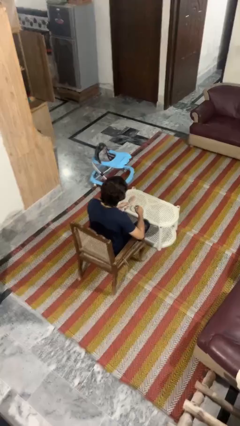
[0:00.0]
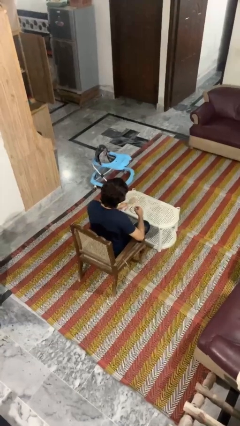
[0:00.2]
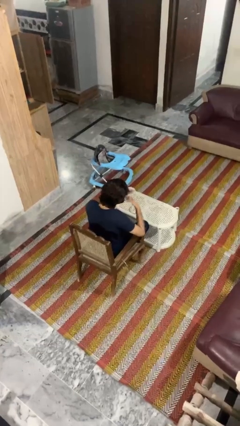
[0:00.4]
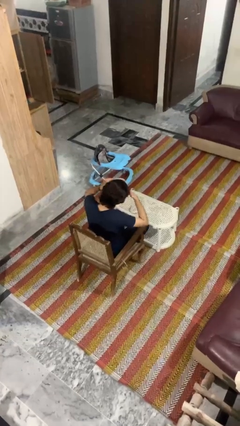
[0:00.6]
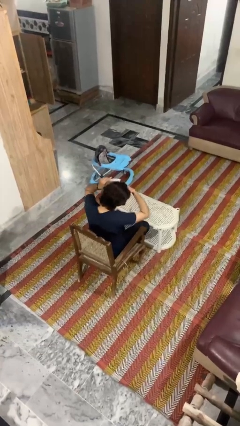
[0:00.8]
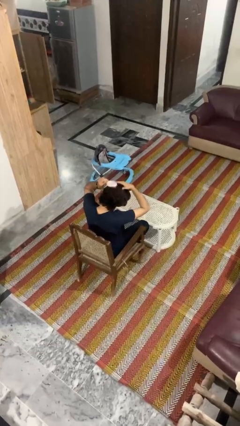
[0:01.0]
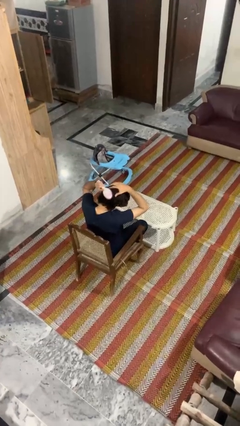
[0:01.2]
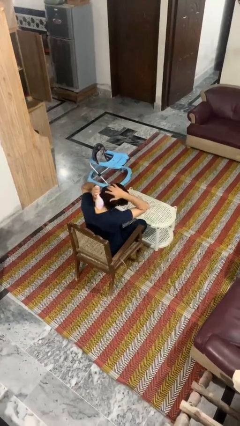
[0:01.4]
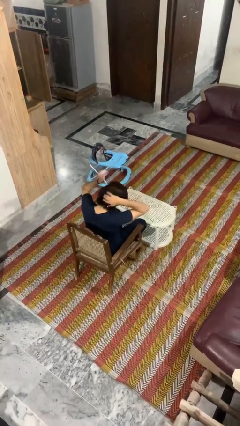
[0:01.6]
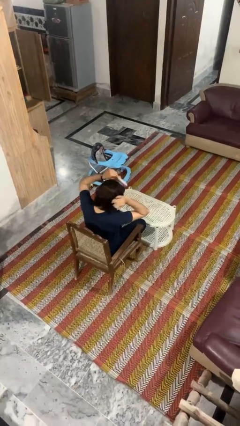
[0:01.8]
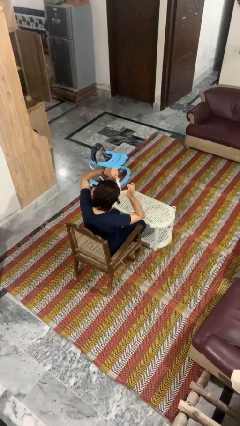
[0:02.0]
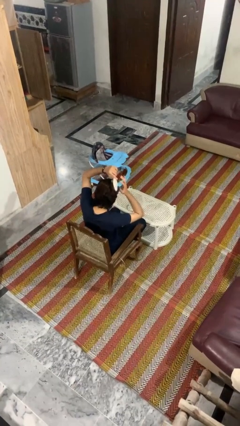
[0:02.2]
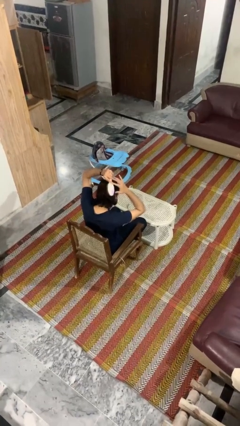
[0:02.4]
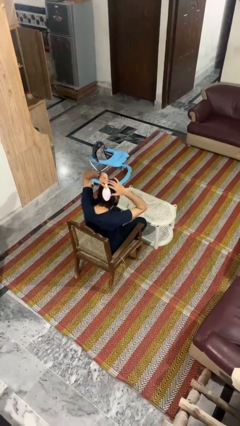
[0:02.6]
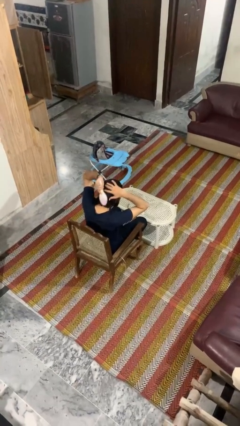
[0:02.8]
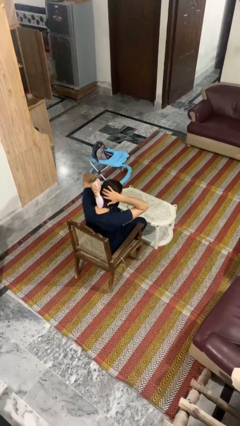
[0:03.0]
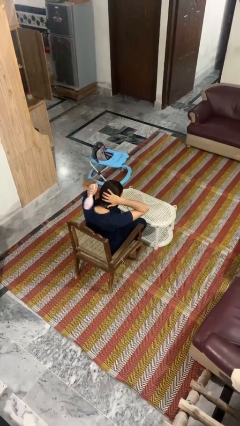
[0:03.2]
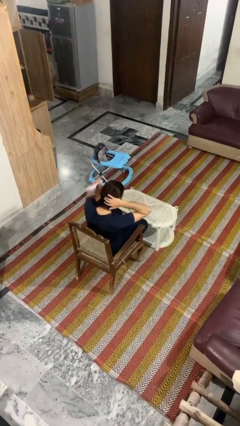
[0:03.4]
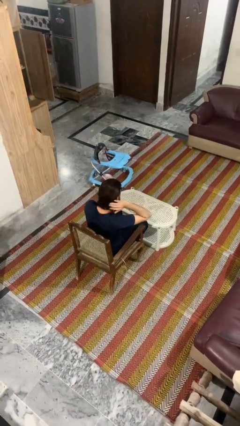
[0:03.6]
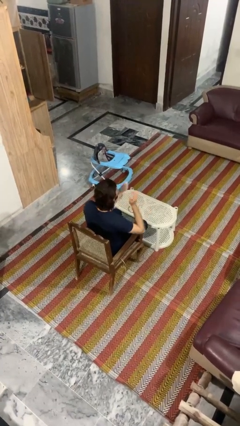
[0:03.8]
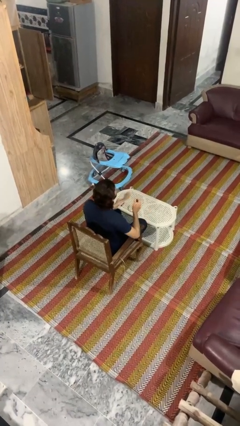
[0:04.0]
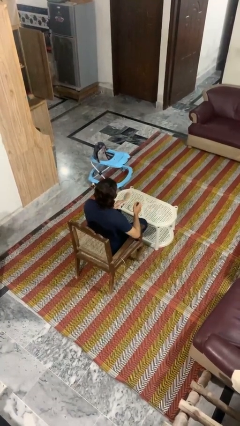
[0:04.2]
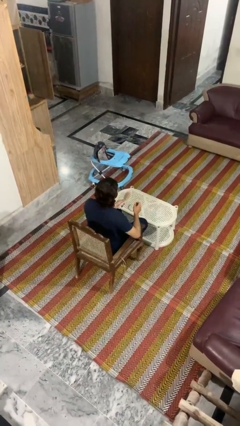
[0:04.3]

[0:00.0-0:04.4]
person brushes hair

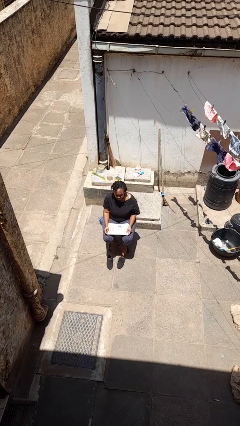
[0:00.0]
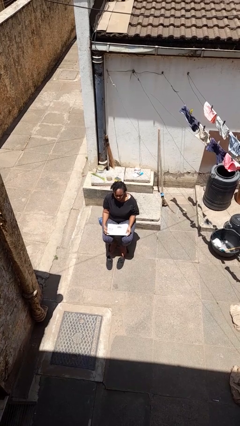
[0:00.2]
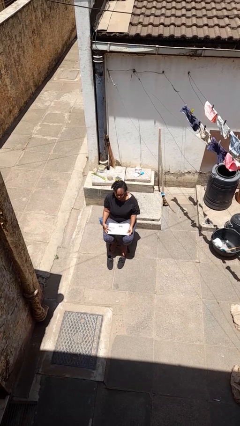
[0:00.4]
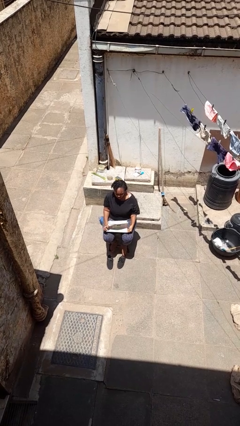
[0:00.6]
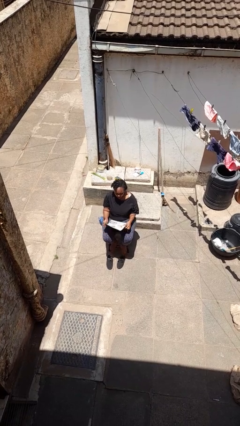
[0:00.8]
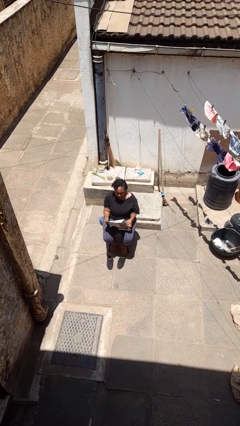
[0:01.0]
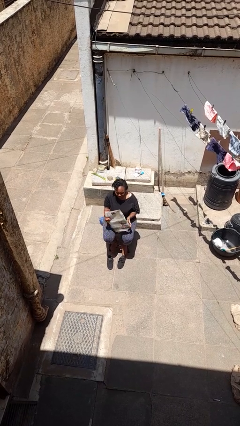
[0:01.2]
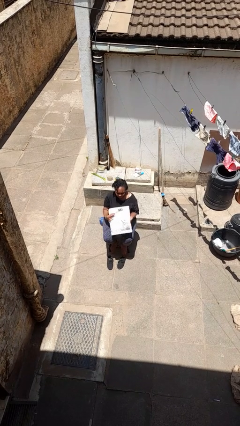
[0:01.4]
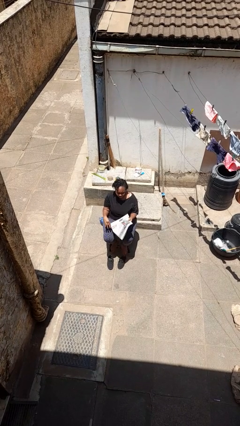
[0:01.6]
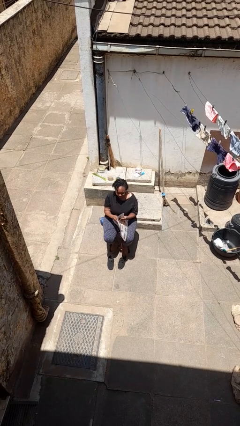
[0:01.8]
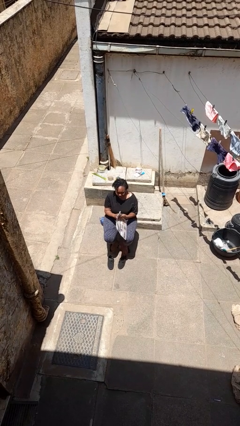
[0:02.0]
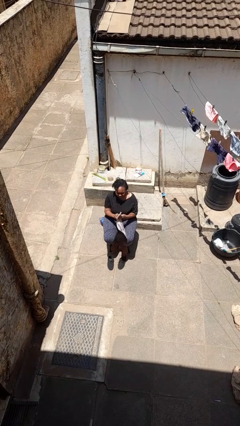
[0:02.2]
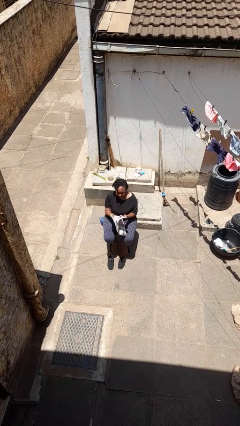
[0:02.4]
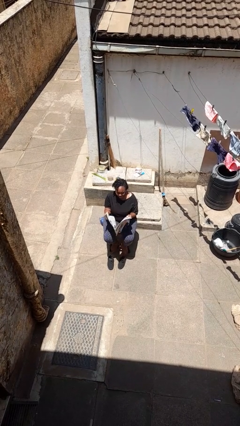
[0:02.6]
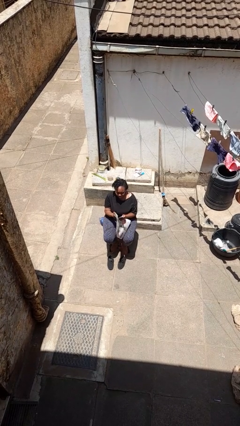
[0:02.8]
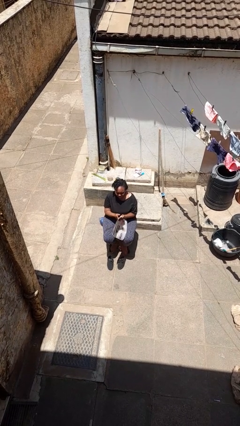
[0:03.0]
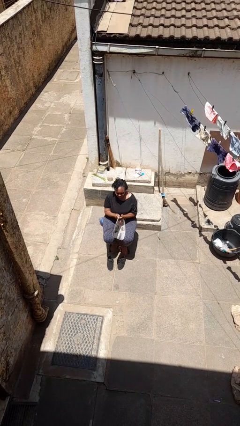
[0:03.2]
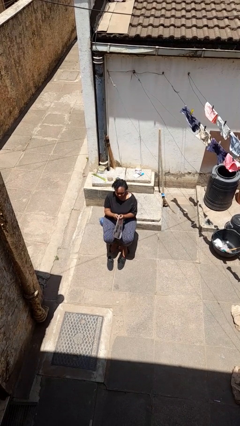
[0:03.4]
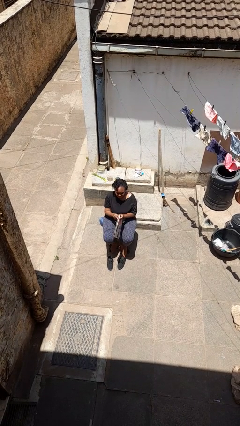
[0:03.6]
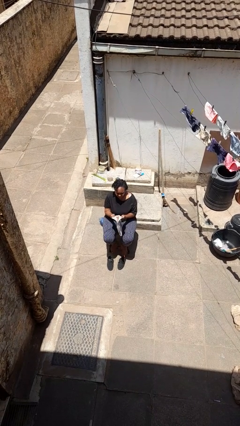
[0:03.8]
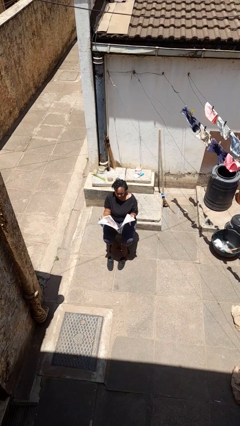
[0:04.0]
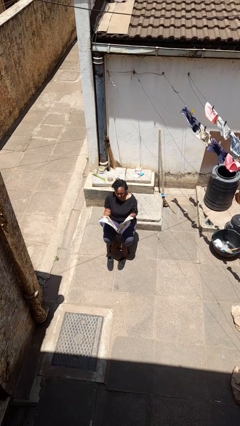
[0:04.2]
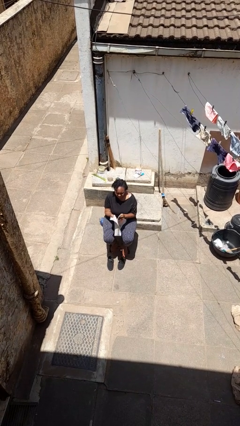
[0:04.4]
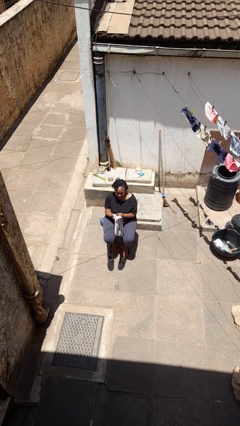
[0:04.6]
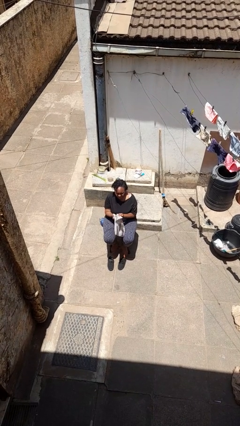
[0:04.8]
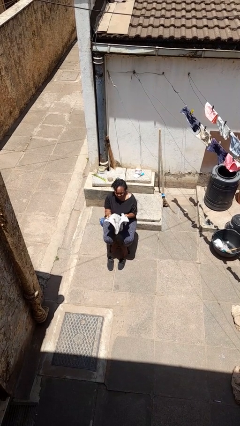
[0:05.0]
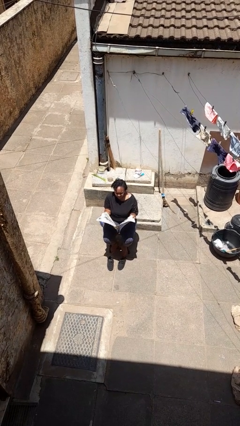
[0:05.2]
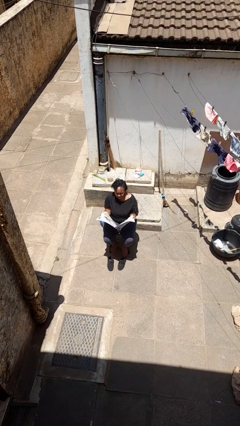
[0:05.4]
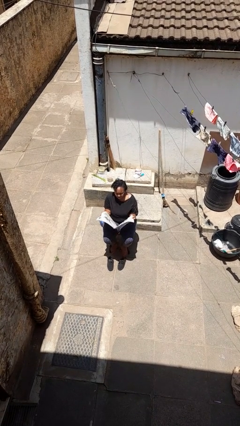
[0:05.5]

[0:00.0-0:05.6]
person reads newspaper

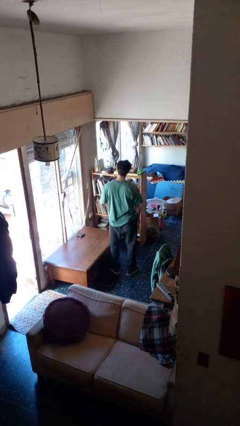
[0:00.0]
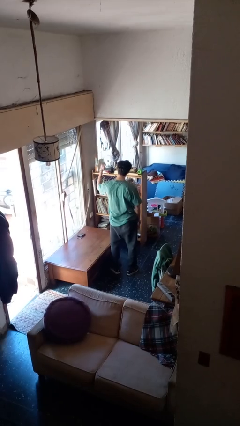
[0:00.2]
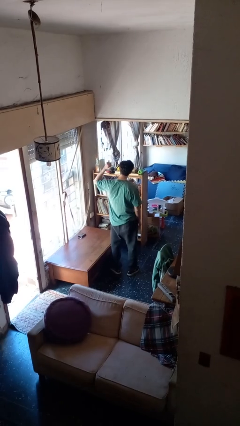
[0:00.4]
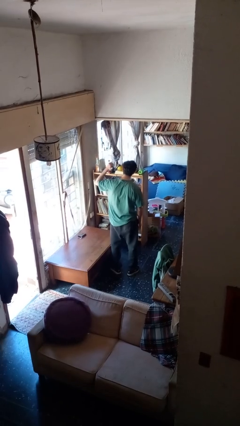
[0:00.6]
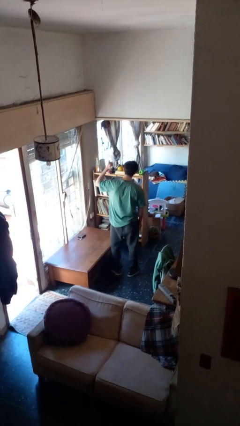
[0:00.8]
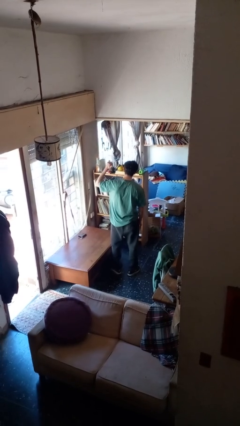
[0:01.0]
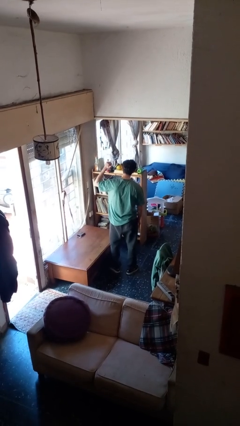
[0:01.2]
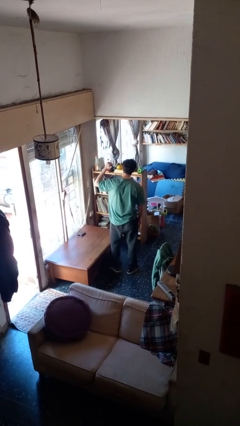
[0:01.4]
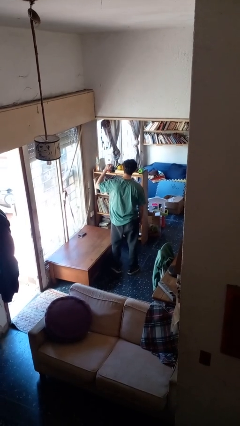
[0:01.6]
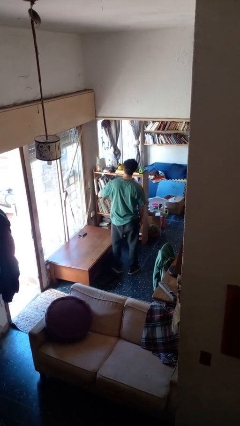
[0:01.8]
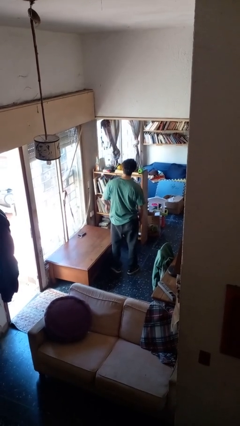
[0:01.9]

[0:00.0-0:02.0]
person gestures behind me

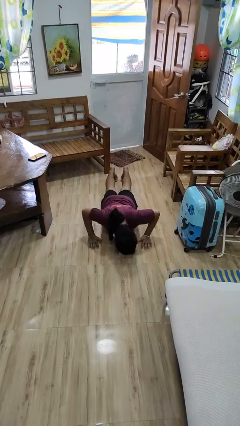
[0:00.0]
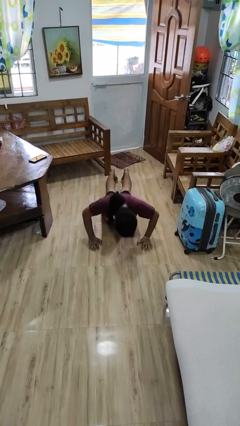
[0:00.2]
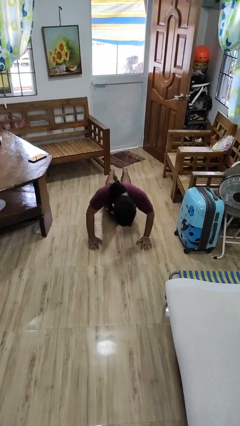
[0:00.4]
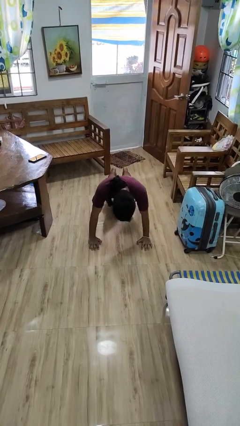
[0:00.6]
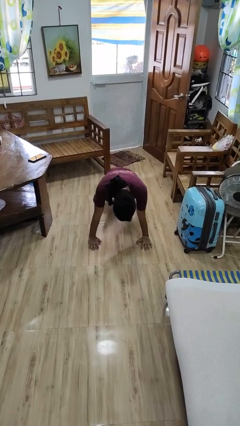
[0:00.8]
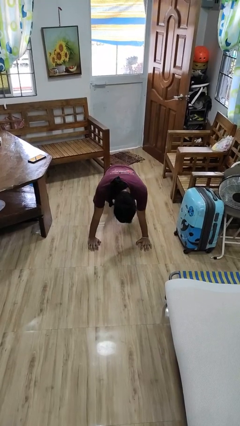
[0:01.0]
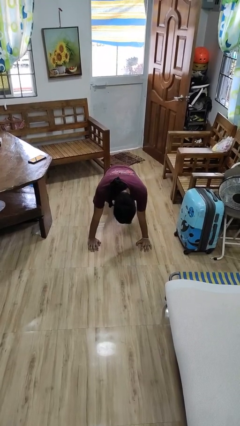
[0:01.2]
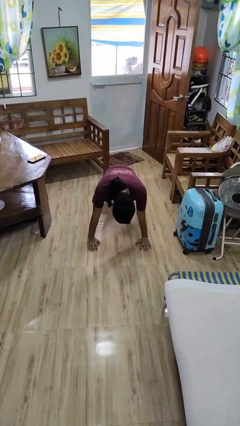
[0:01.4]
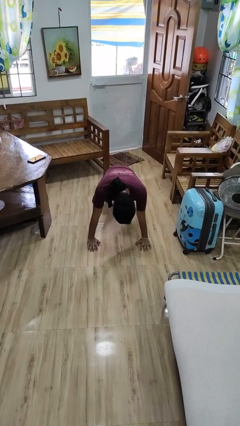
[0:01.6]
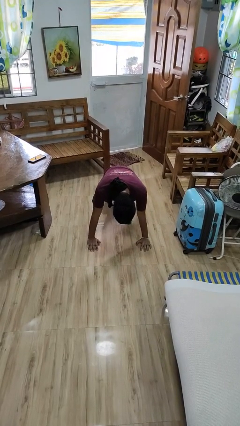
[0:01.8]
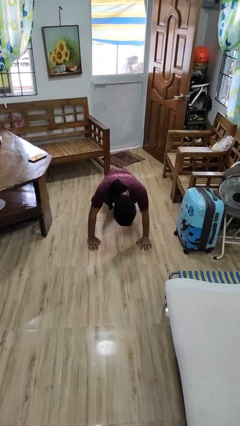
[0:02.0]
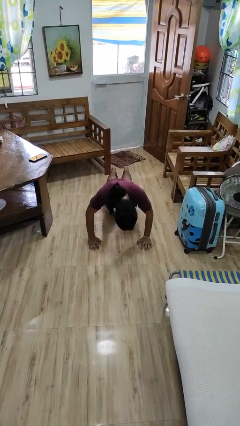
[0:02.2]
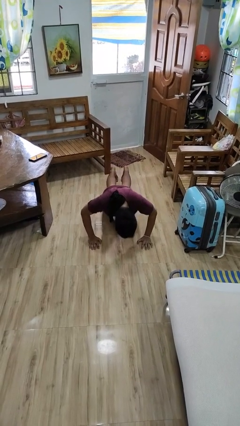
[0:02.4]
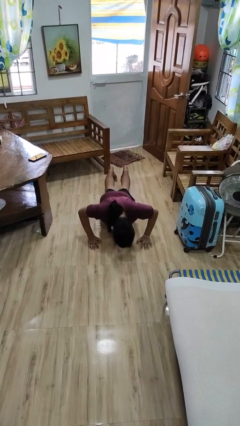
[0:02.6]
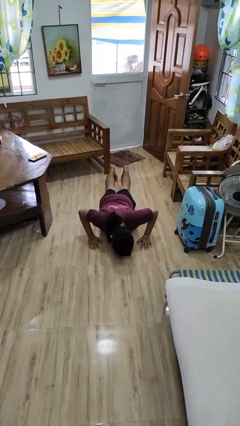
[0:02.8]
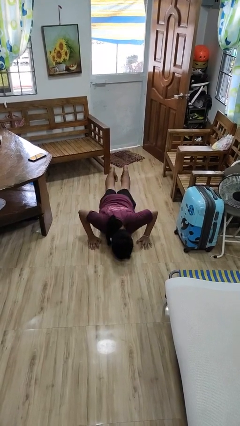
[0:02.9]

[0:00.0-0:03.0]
person exercises with pushup

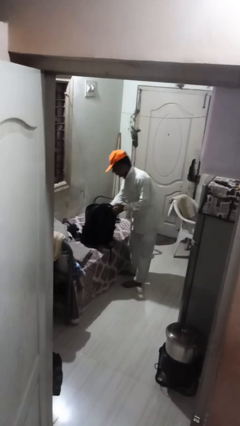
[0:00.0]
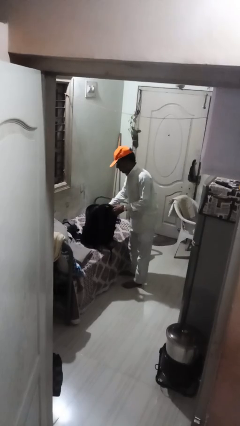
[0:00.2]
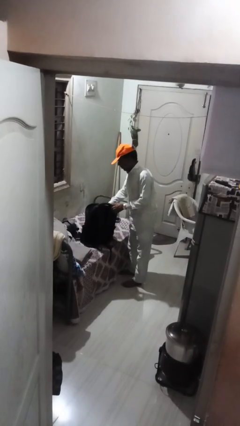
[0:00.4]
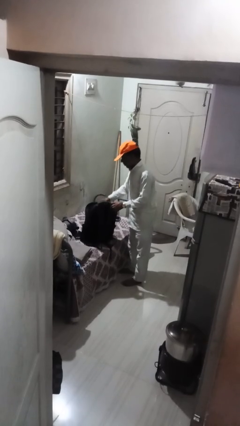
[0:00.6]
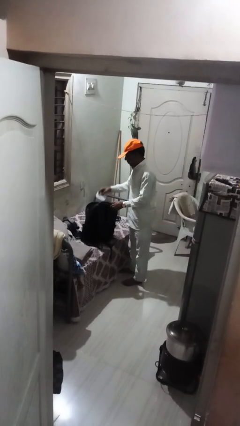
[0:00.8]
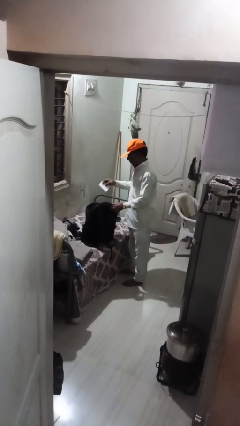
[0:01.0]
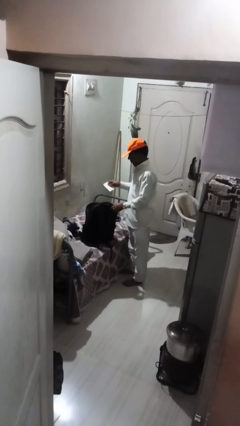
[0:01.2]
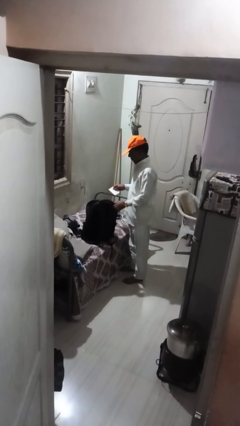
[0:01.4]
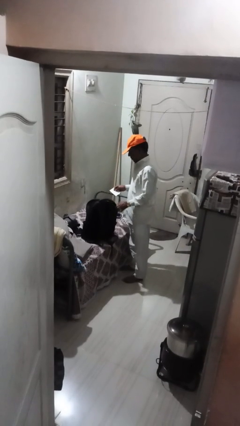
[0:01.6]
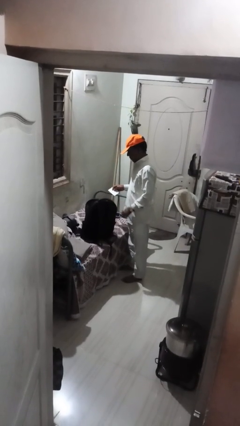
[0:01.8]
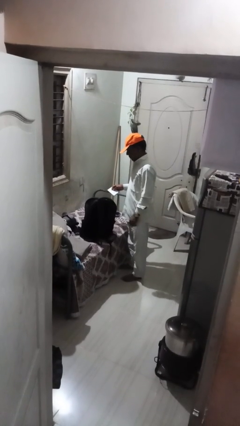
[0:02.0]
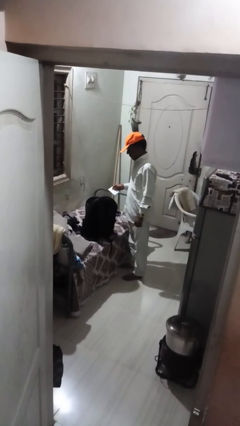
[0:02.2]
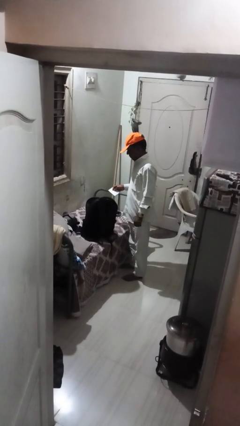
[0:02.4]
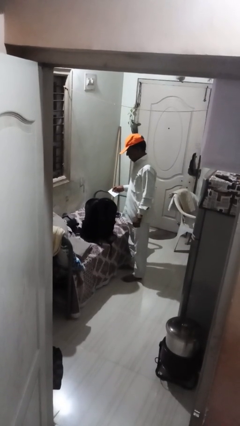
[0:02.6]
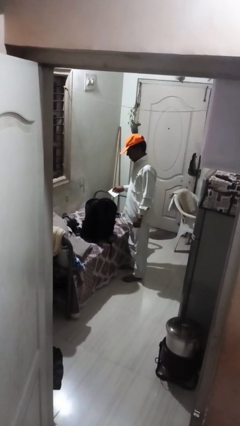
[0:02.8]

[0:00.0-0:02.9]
person takes object from backpack
